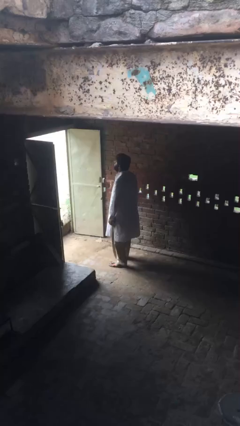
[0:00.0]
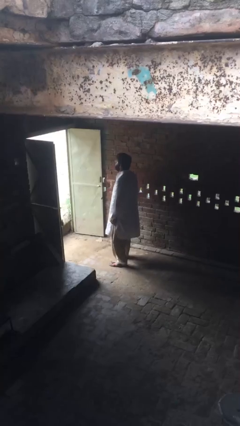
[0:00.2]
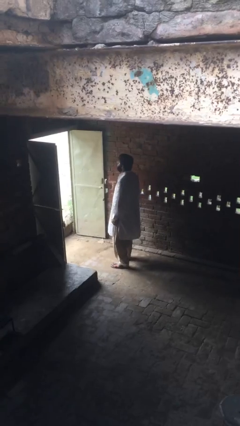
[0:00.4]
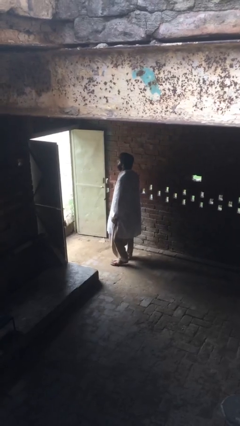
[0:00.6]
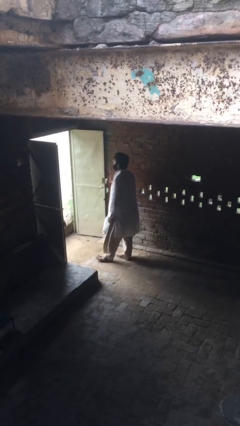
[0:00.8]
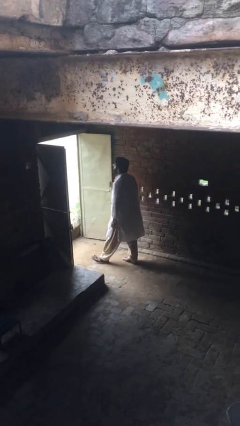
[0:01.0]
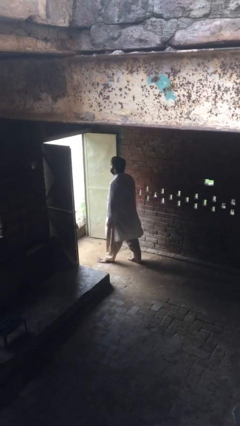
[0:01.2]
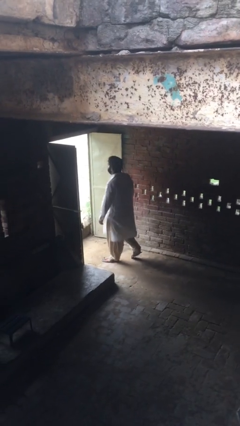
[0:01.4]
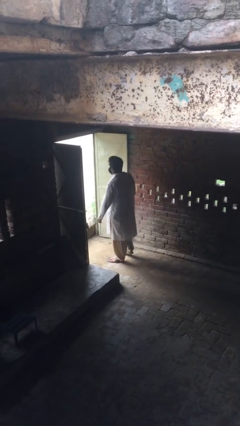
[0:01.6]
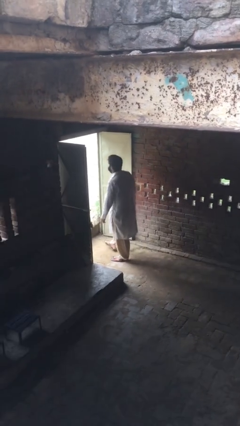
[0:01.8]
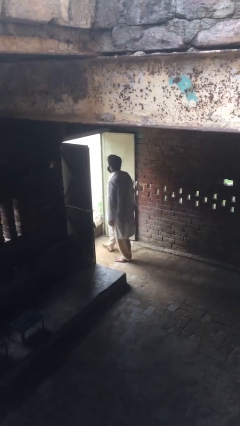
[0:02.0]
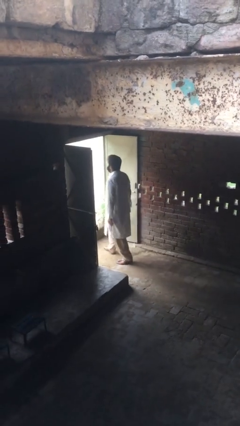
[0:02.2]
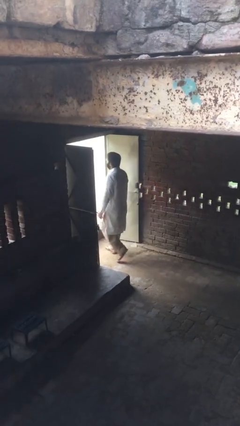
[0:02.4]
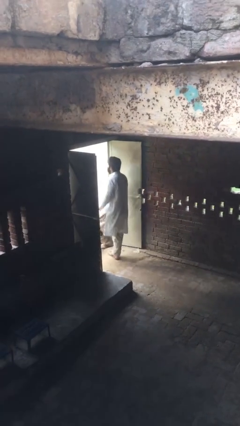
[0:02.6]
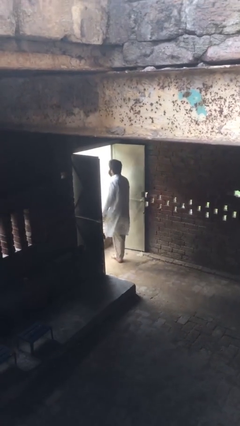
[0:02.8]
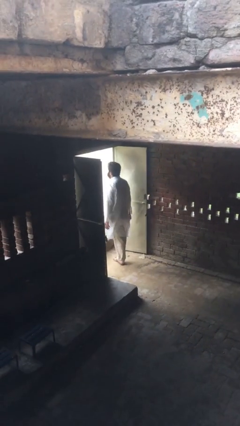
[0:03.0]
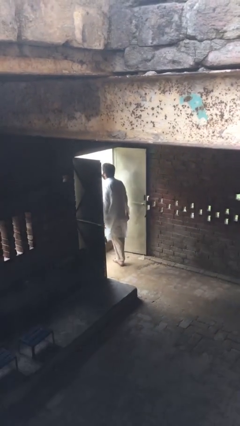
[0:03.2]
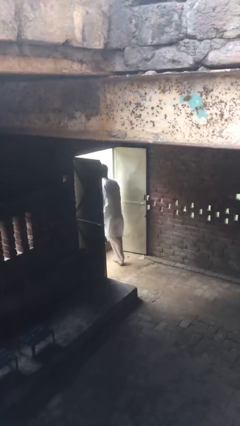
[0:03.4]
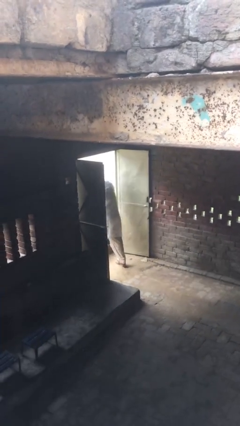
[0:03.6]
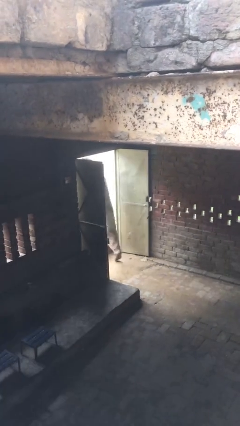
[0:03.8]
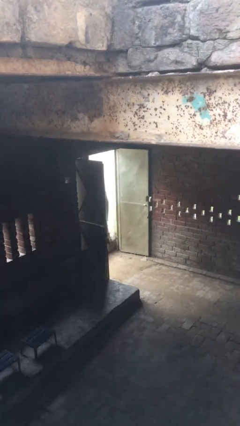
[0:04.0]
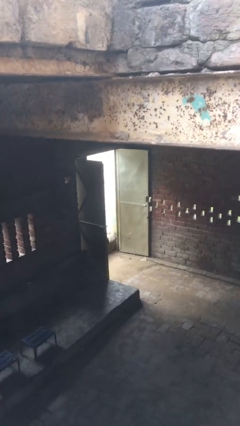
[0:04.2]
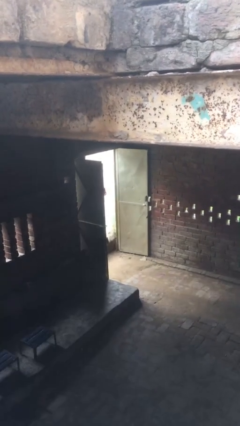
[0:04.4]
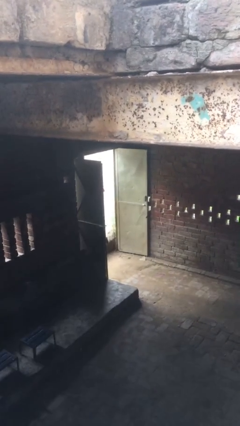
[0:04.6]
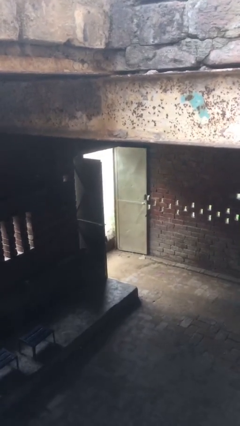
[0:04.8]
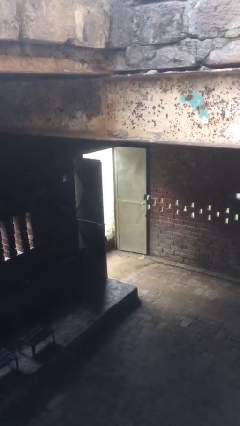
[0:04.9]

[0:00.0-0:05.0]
person exits scene through structure

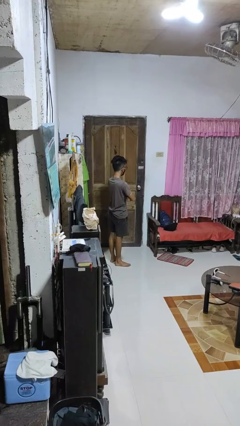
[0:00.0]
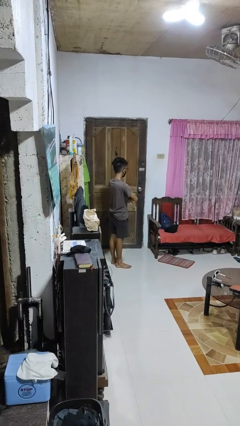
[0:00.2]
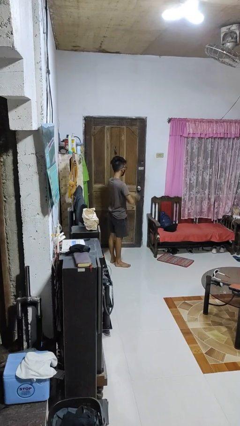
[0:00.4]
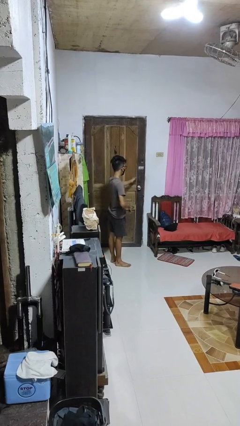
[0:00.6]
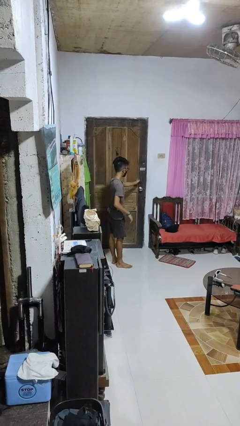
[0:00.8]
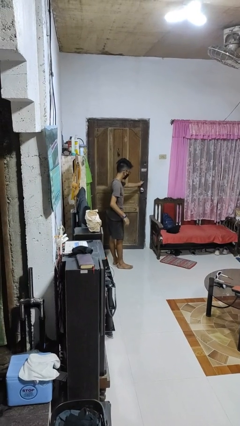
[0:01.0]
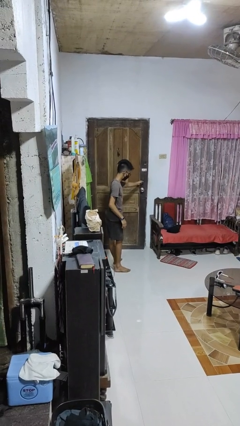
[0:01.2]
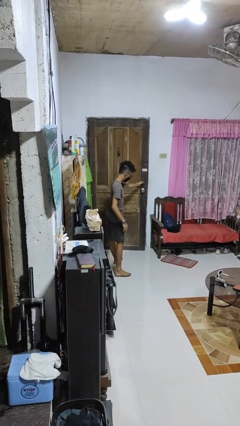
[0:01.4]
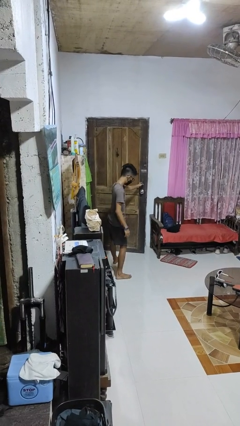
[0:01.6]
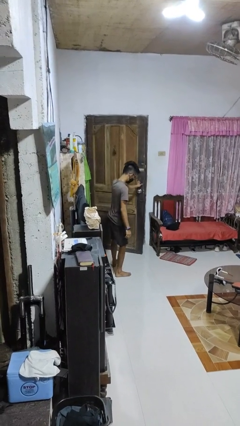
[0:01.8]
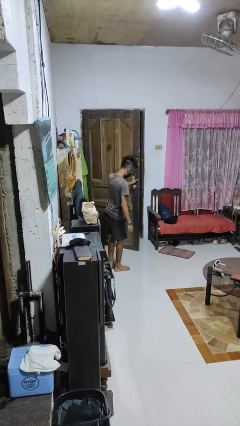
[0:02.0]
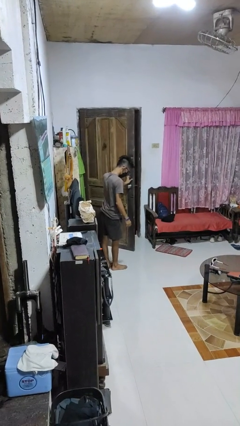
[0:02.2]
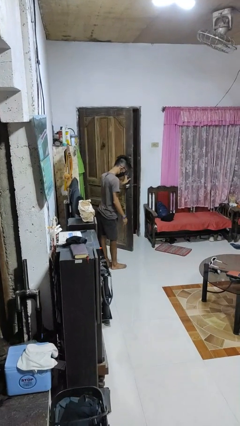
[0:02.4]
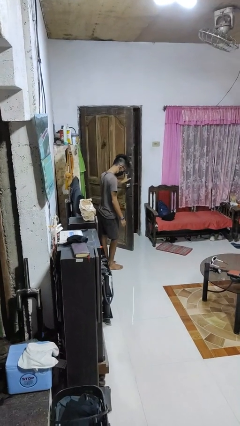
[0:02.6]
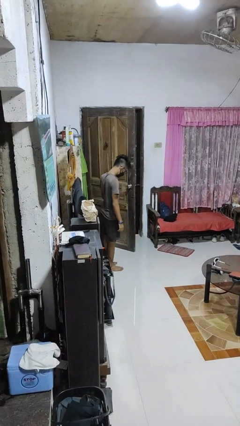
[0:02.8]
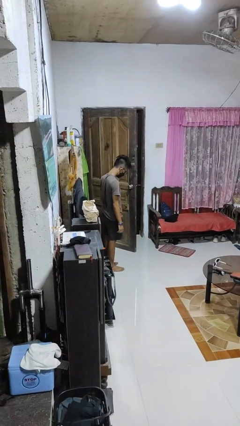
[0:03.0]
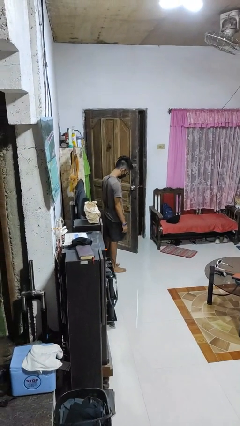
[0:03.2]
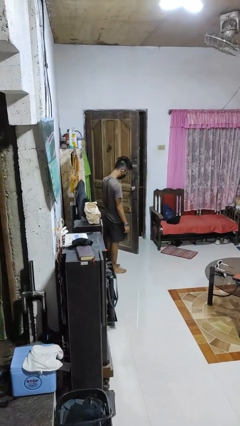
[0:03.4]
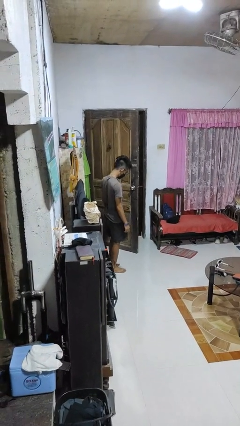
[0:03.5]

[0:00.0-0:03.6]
person opens facility door

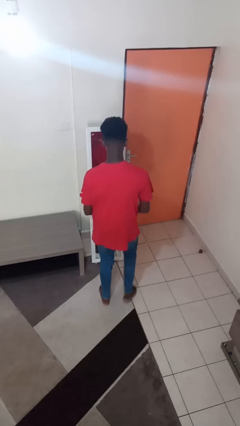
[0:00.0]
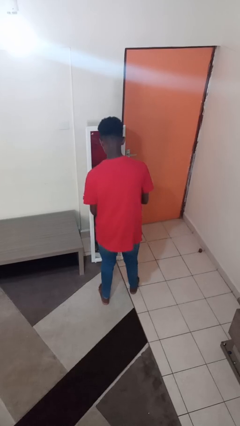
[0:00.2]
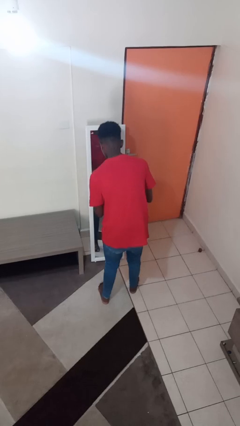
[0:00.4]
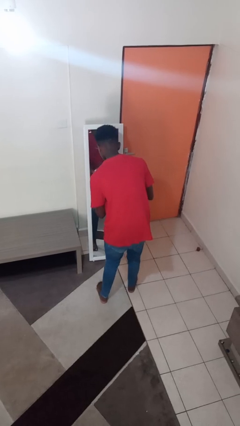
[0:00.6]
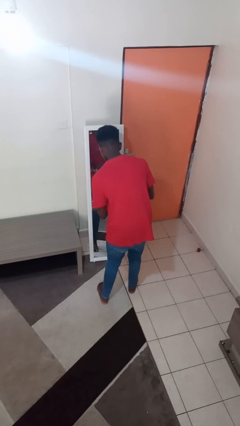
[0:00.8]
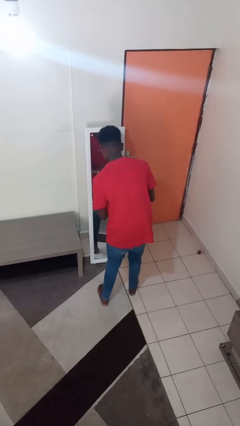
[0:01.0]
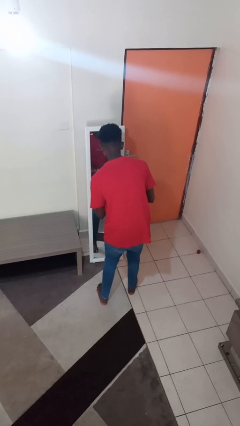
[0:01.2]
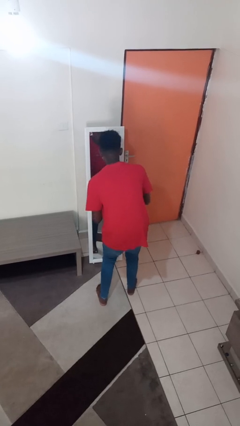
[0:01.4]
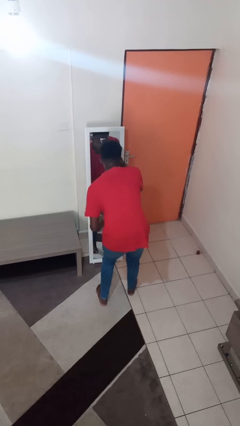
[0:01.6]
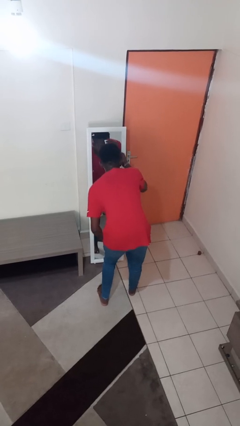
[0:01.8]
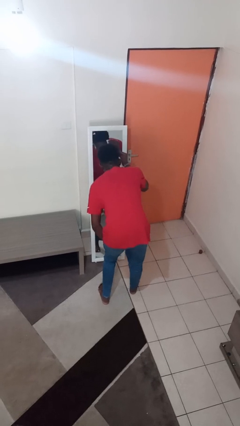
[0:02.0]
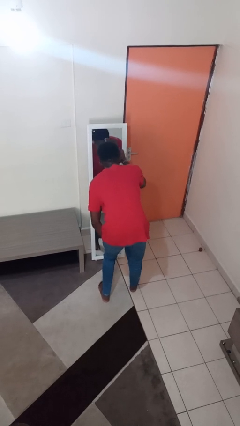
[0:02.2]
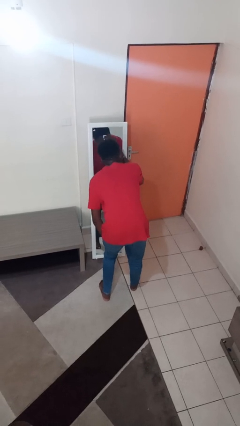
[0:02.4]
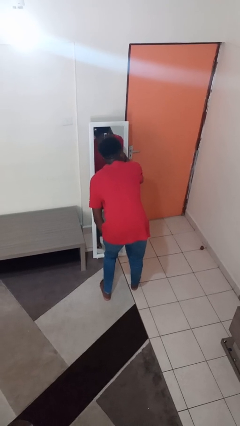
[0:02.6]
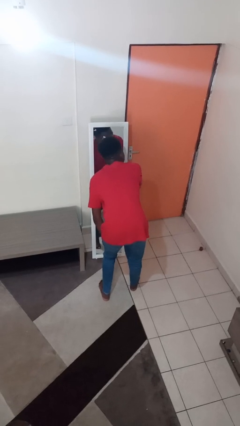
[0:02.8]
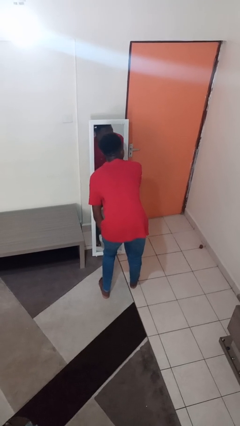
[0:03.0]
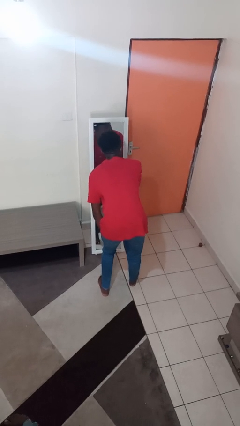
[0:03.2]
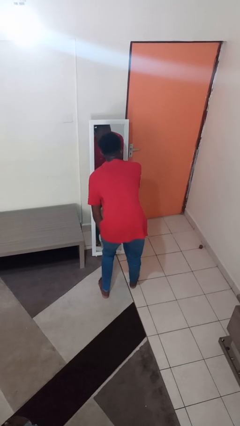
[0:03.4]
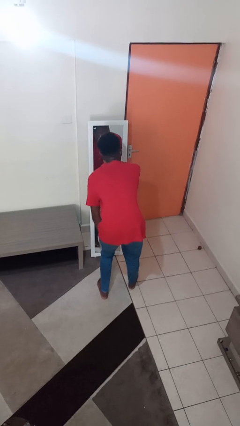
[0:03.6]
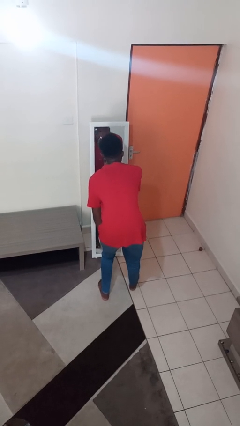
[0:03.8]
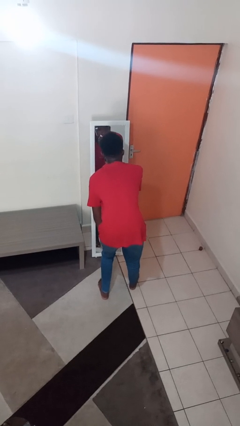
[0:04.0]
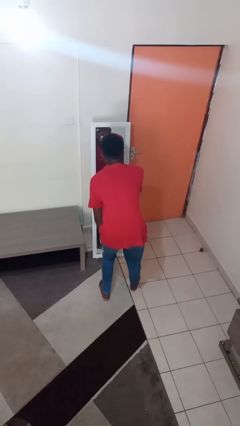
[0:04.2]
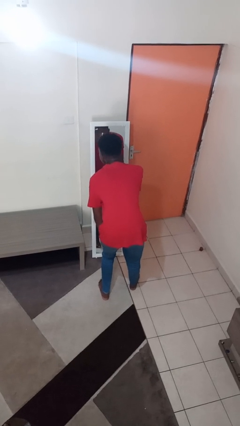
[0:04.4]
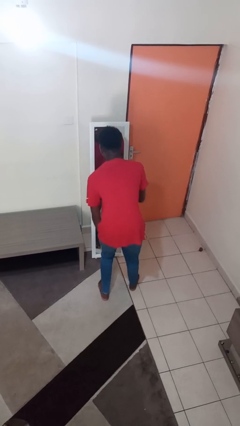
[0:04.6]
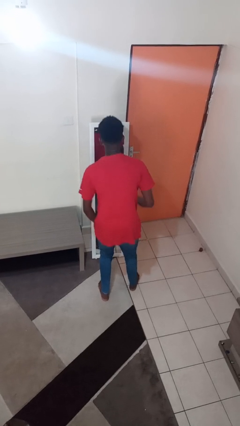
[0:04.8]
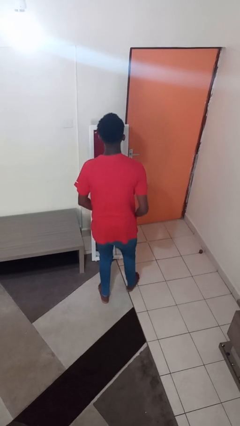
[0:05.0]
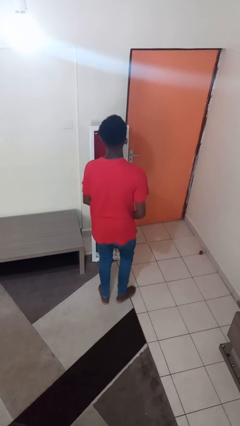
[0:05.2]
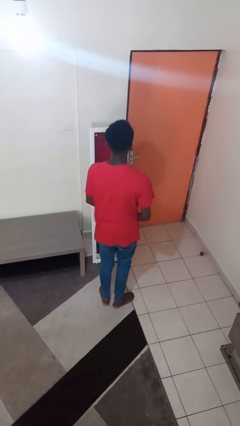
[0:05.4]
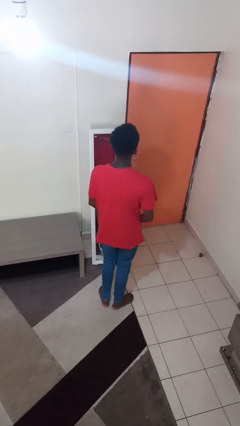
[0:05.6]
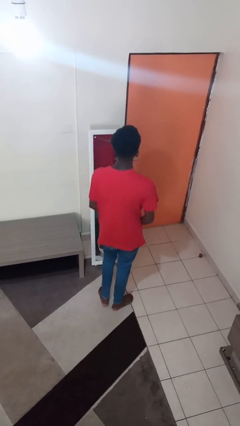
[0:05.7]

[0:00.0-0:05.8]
person applies foundation makeup

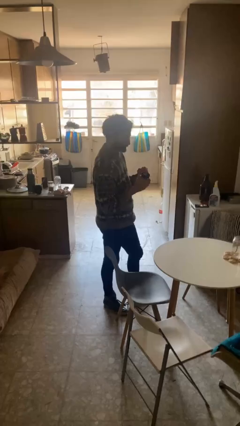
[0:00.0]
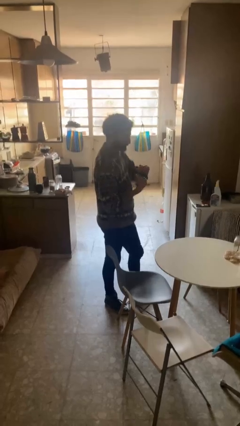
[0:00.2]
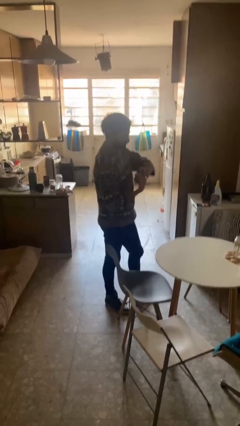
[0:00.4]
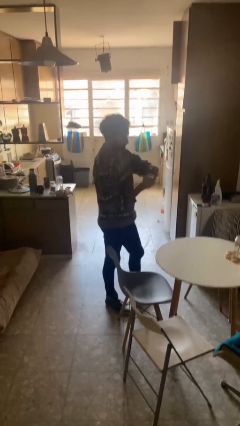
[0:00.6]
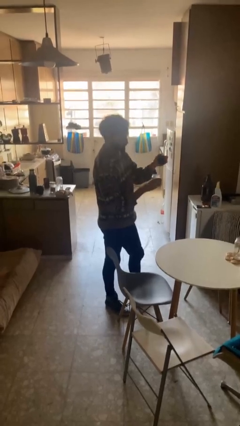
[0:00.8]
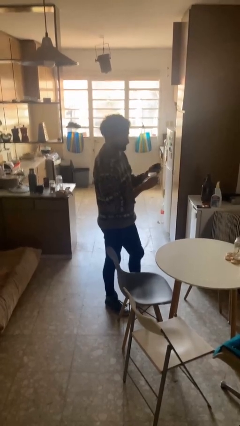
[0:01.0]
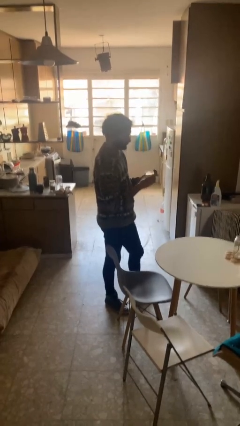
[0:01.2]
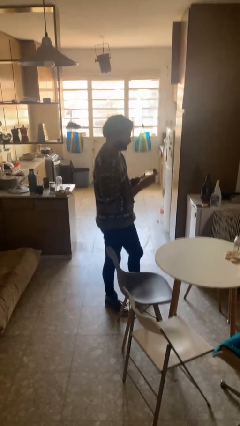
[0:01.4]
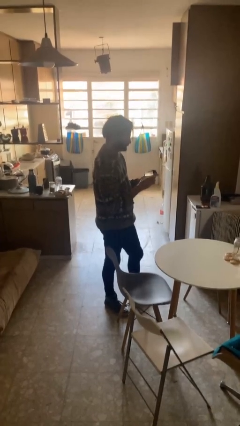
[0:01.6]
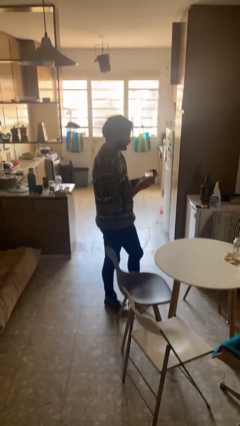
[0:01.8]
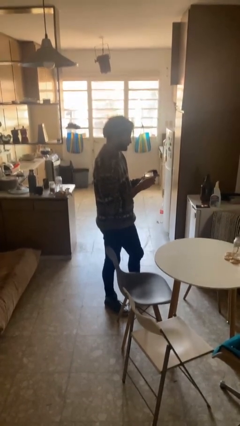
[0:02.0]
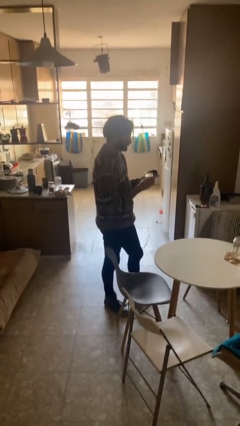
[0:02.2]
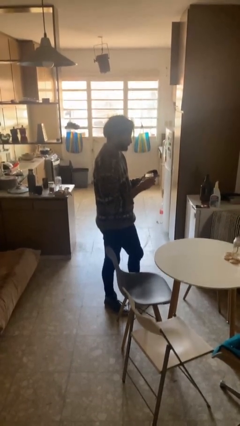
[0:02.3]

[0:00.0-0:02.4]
person opens jar

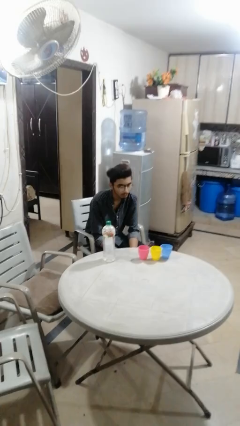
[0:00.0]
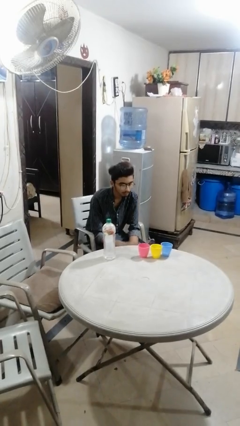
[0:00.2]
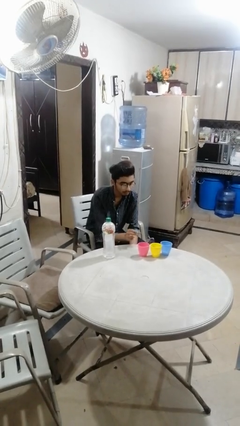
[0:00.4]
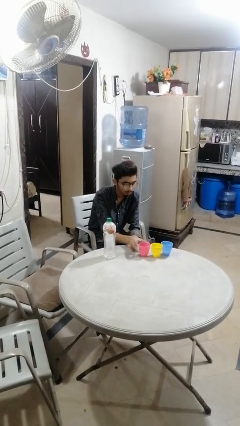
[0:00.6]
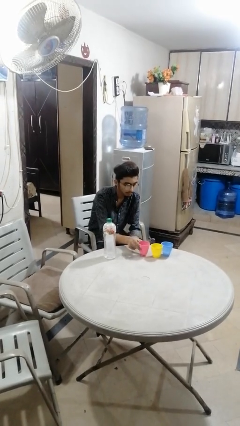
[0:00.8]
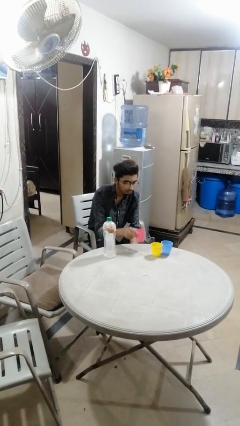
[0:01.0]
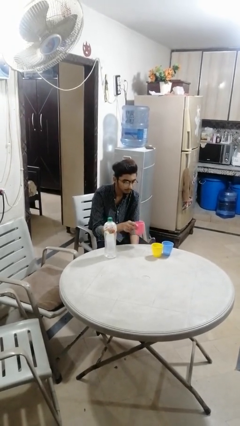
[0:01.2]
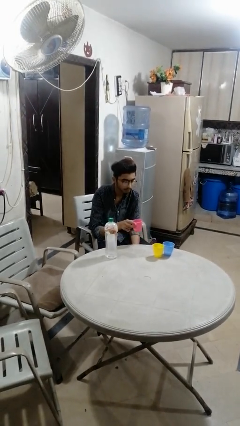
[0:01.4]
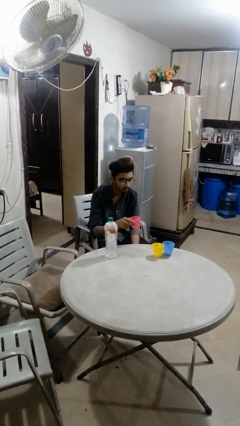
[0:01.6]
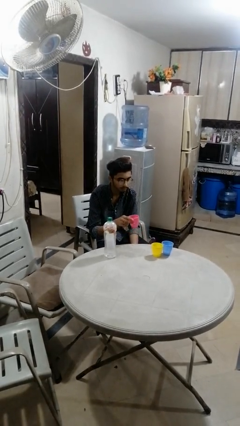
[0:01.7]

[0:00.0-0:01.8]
person picks up object from table
